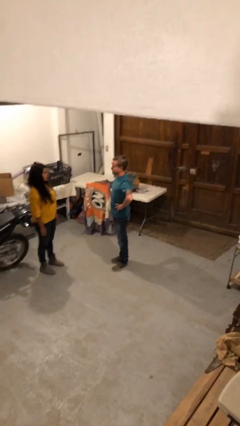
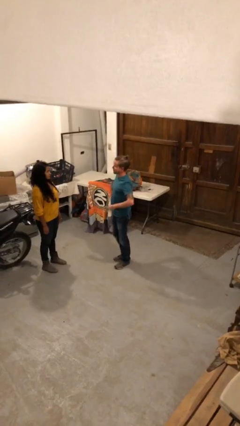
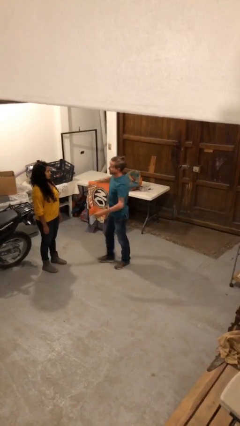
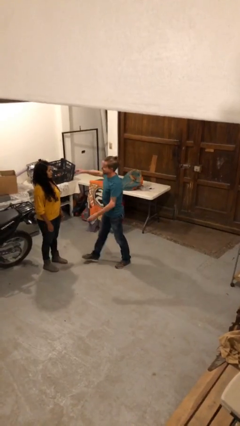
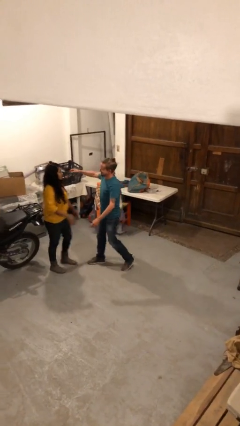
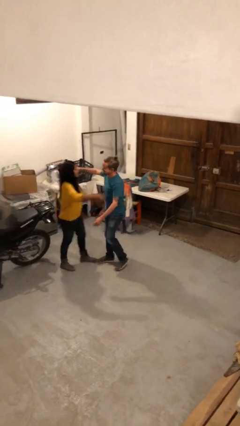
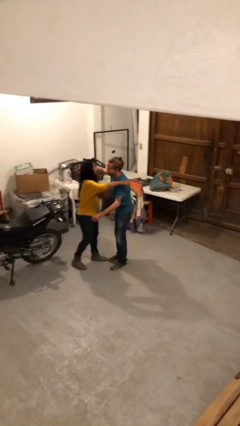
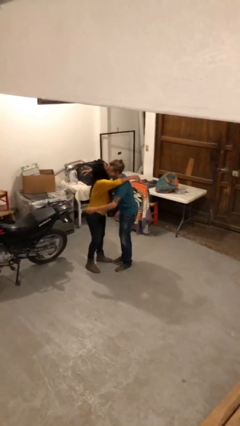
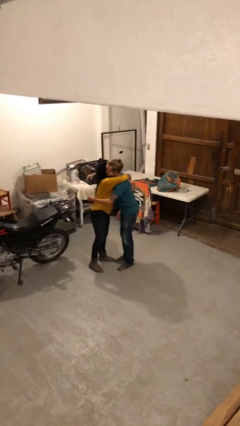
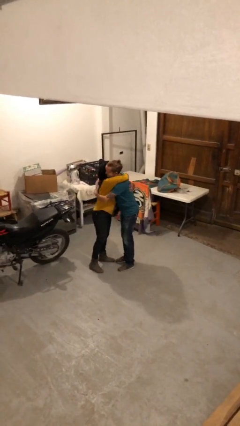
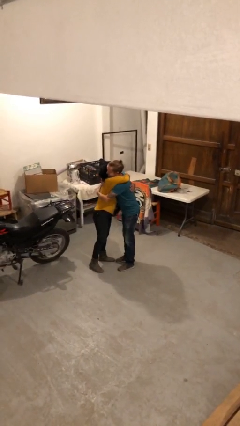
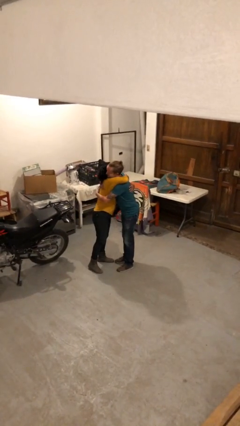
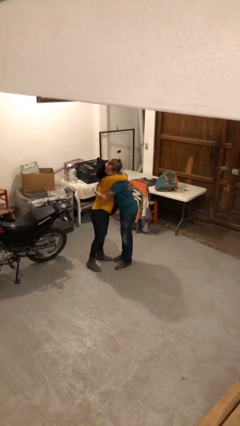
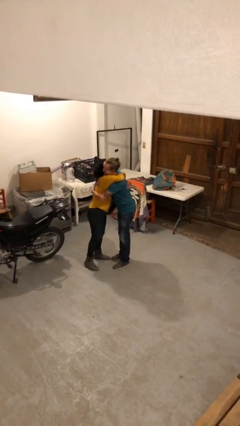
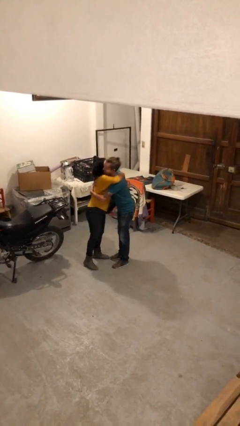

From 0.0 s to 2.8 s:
person embraces person

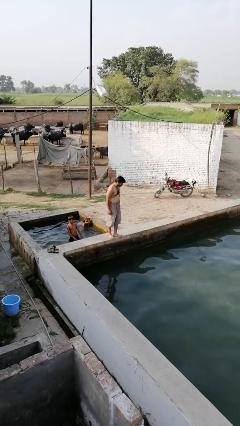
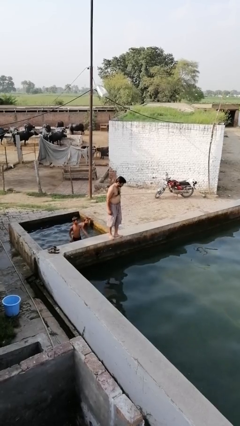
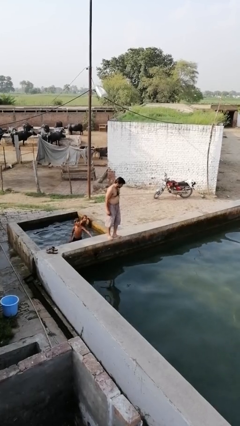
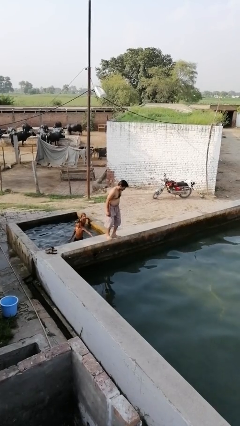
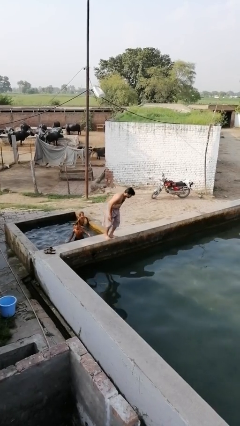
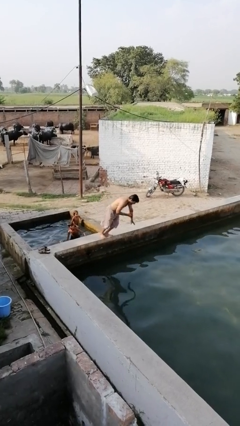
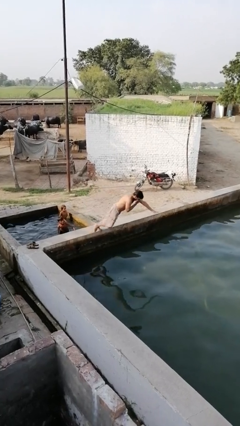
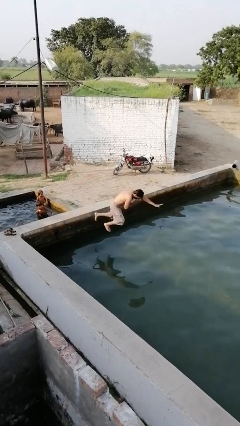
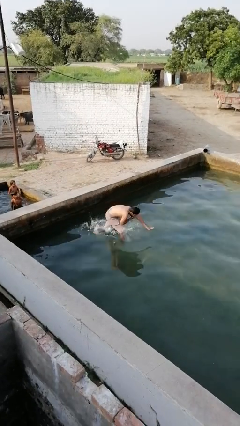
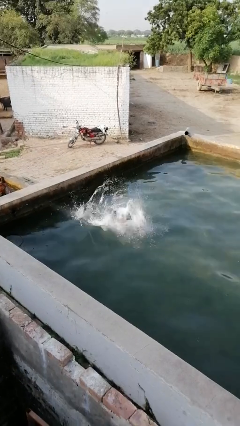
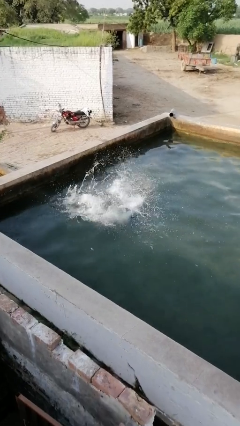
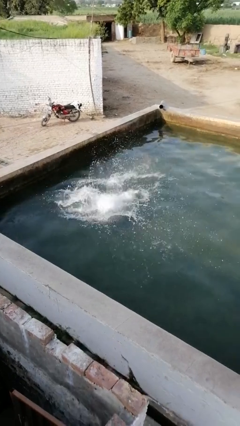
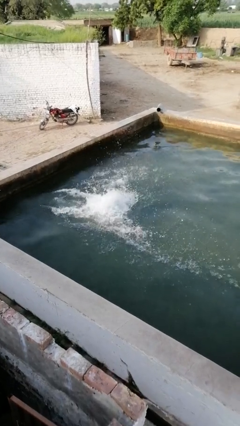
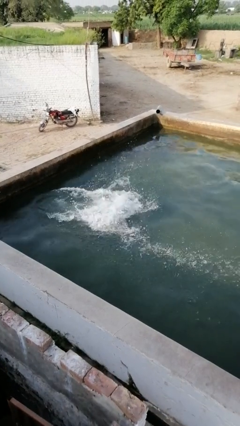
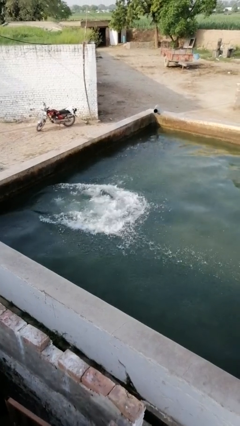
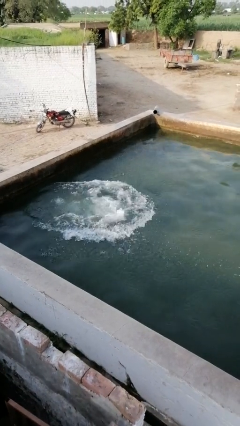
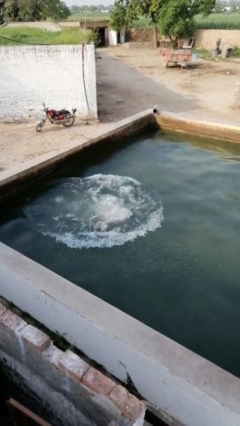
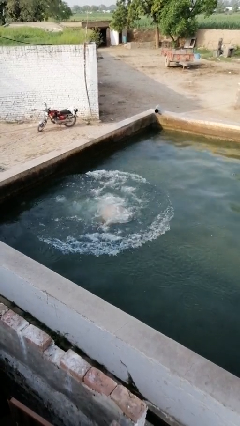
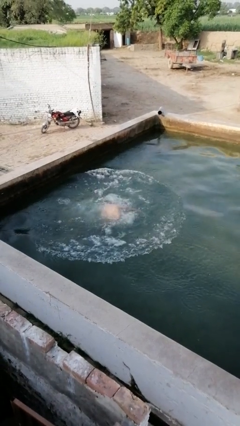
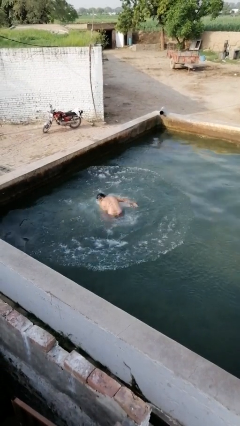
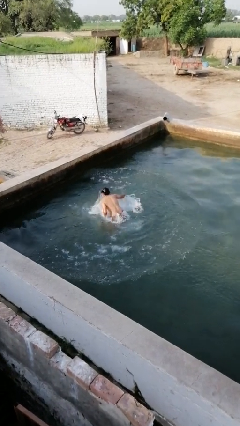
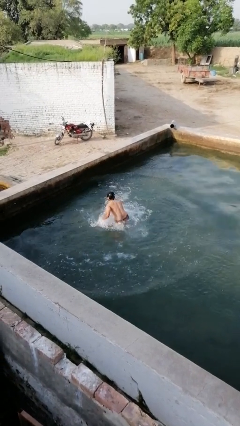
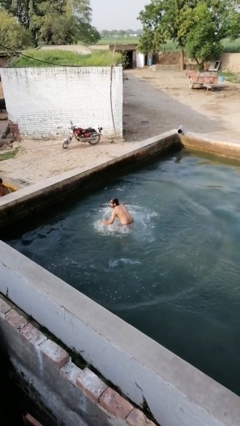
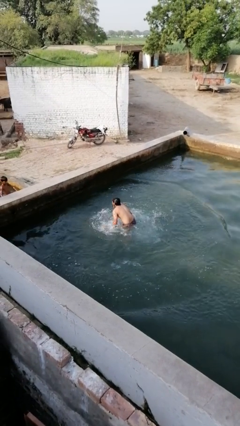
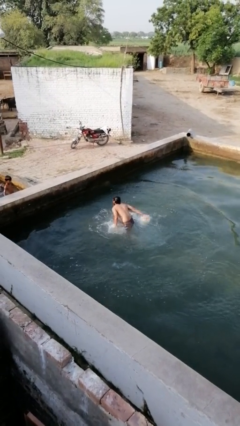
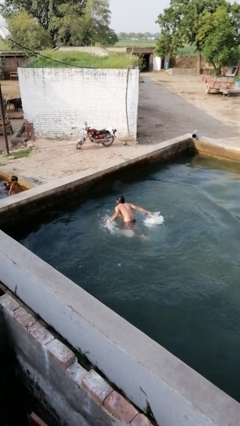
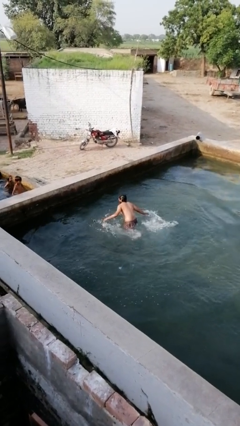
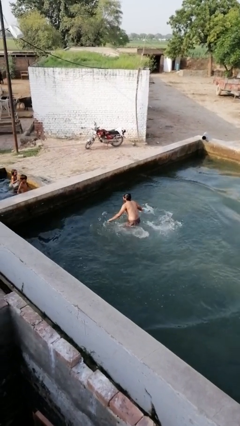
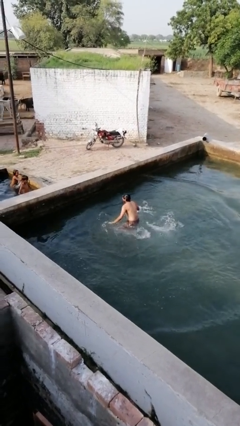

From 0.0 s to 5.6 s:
person jumps into pool

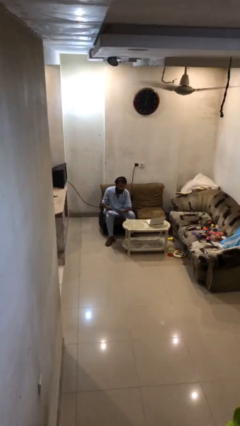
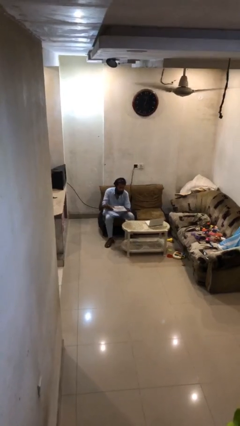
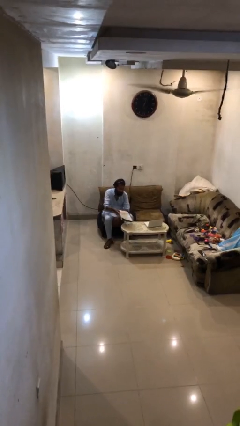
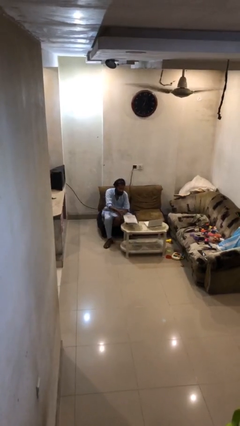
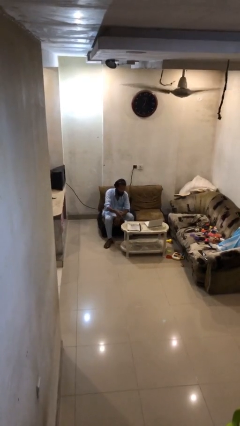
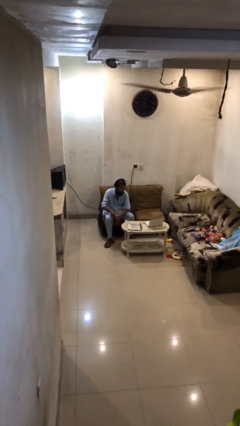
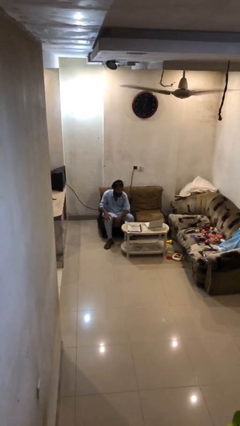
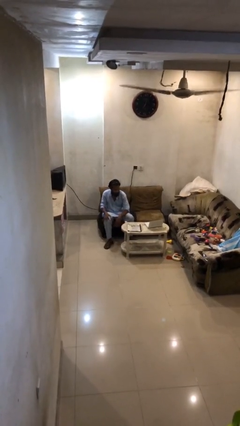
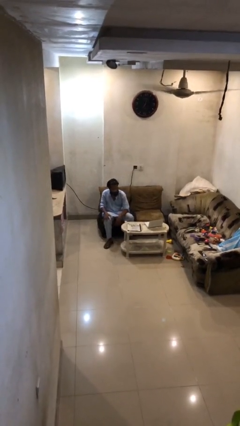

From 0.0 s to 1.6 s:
person puts down object on table

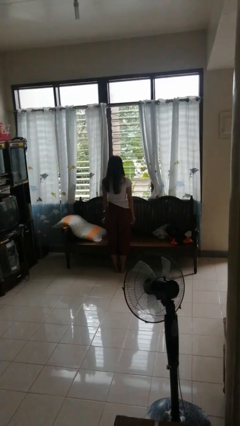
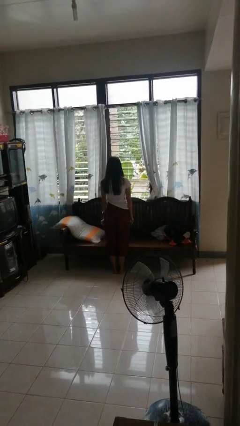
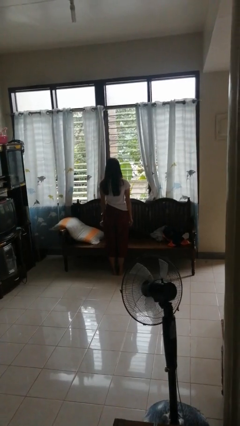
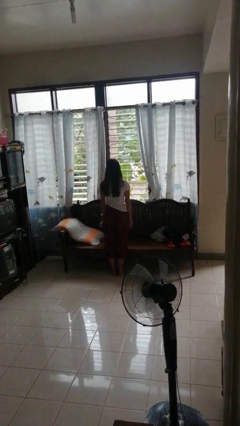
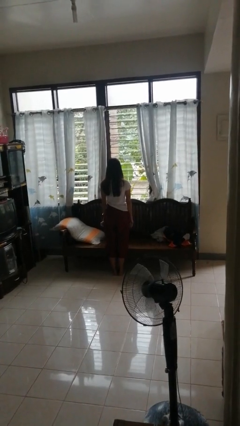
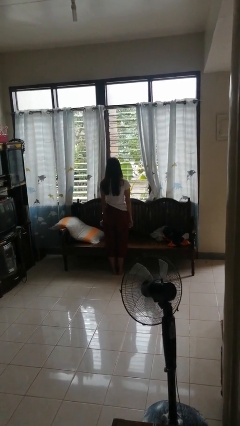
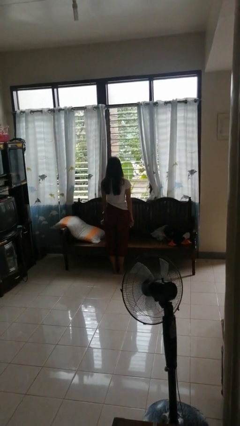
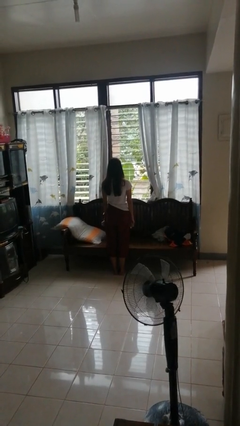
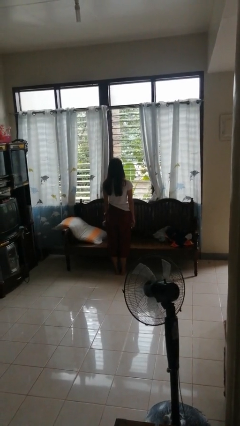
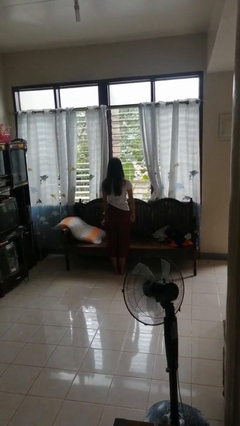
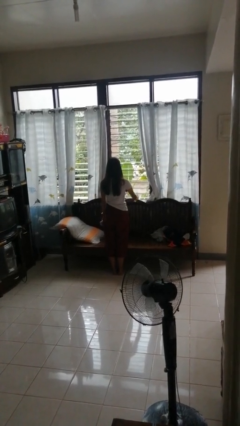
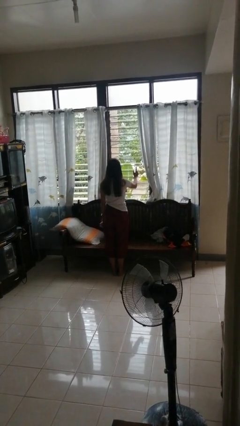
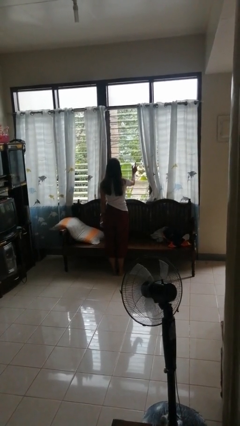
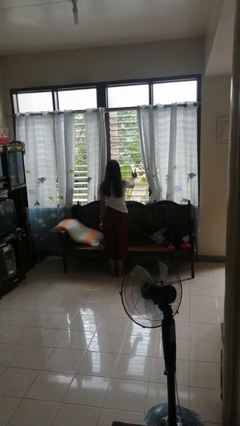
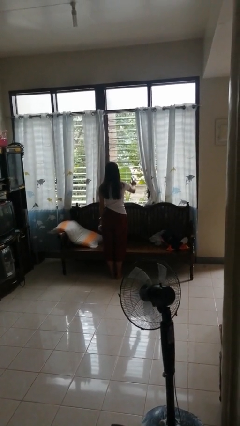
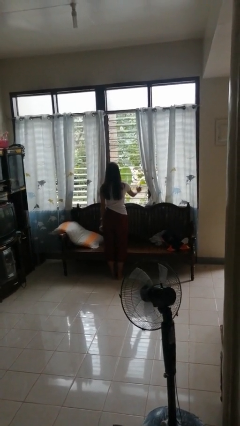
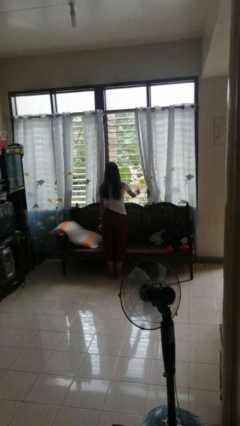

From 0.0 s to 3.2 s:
person sprays from bottle

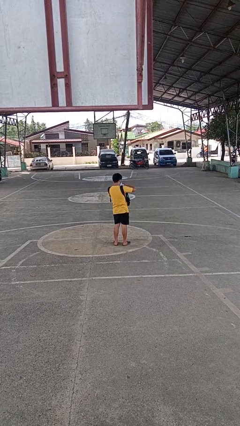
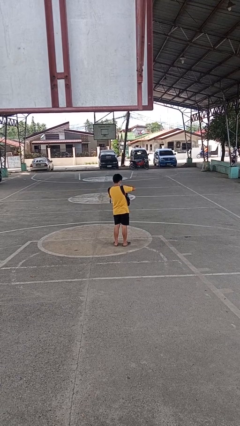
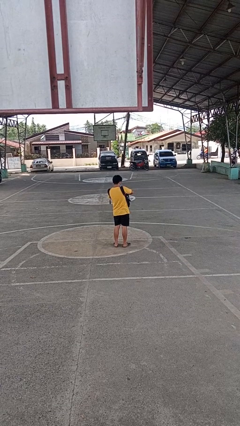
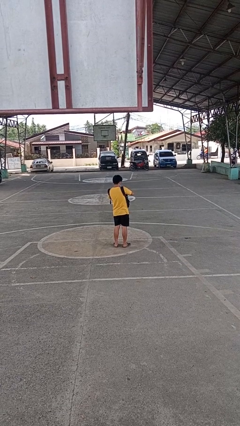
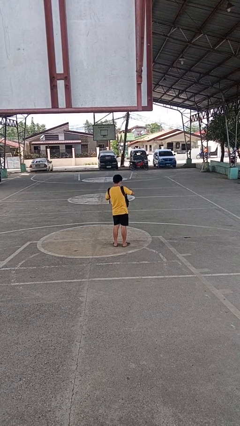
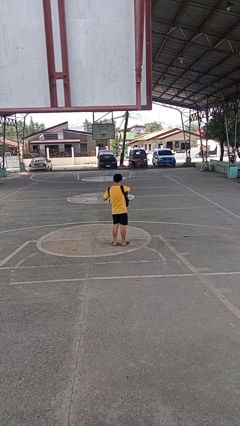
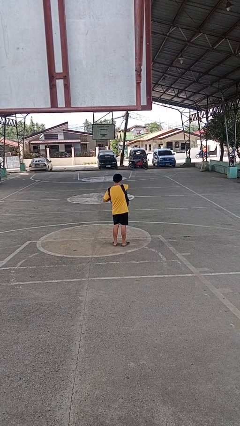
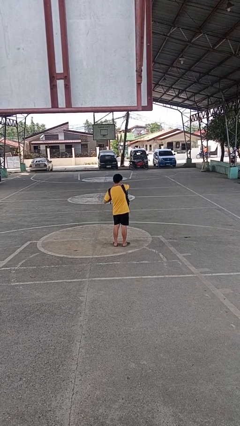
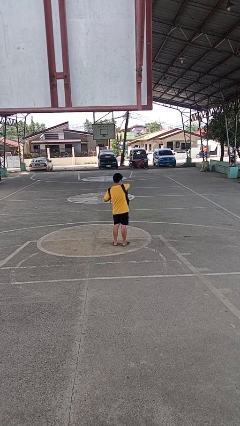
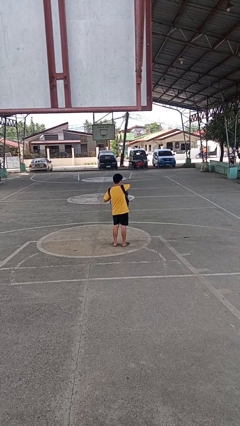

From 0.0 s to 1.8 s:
person puts object into backpack

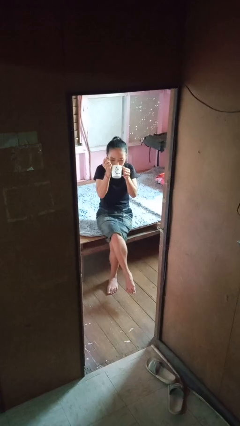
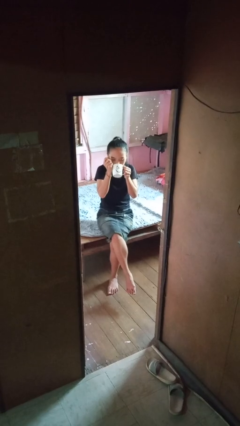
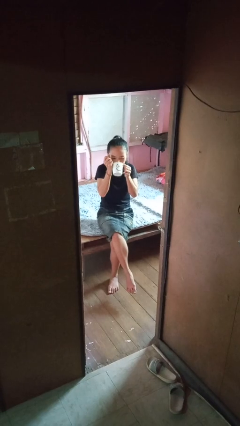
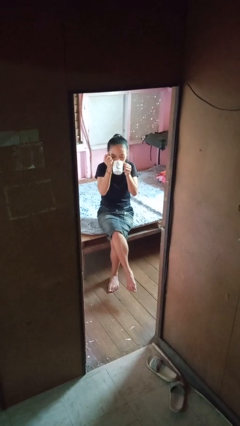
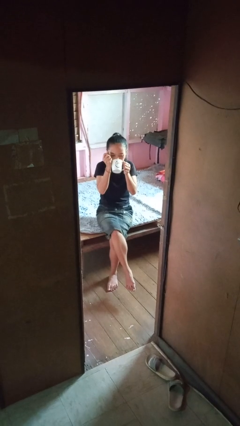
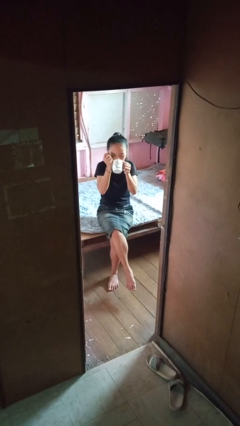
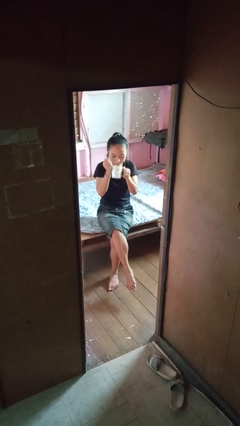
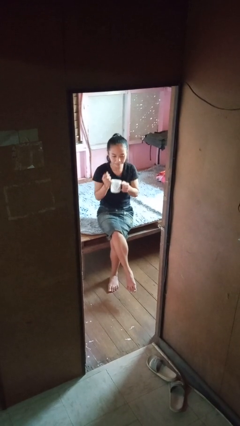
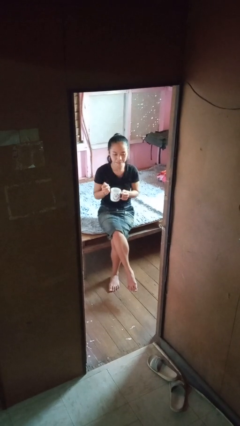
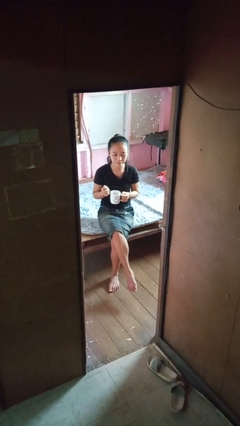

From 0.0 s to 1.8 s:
person drinks from mug

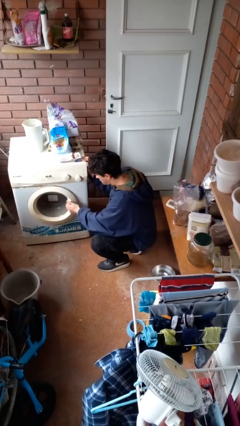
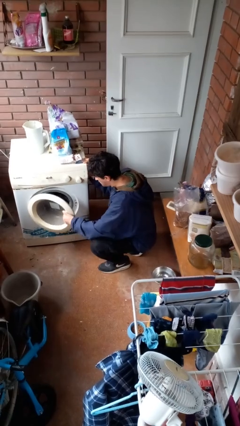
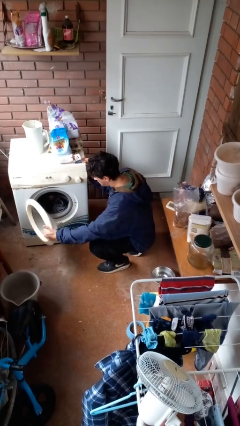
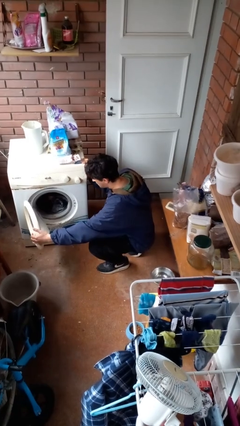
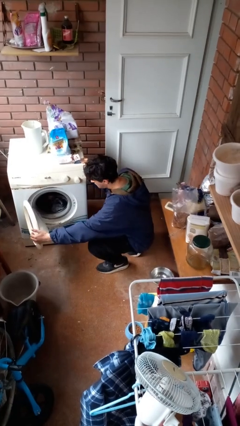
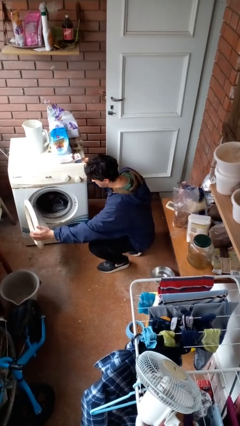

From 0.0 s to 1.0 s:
person opens clothes washer
